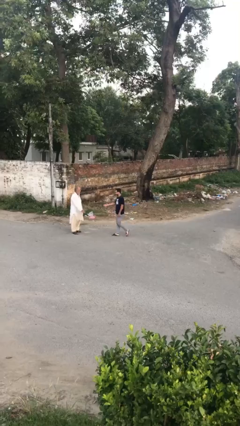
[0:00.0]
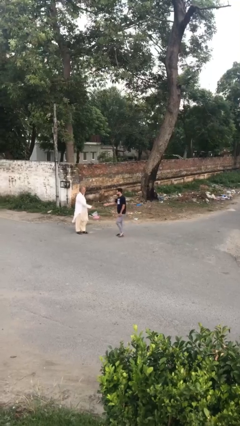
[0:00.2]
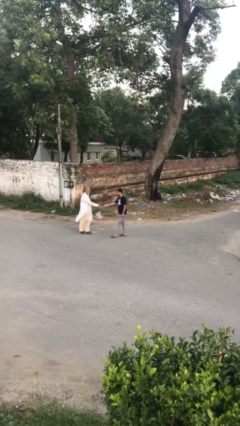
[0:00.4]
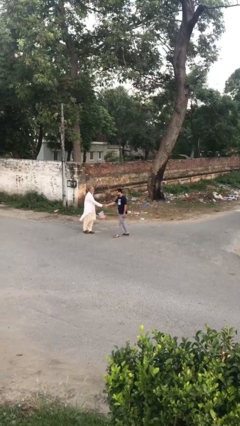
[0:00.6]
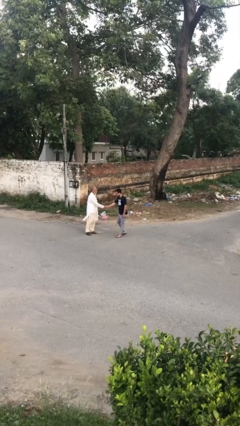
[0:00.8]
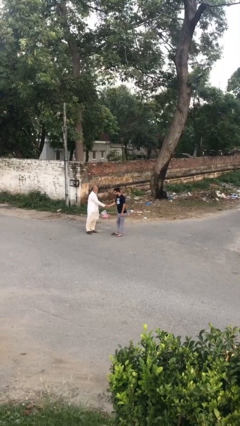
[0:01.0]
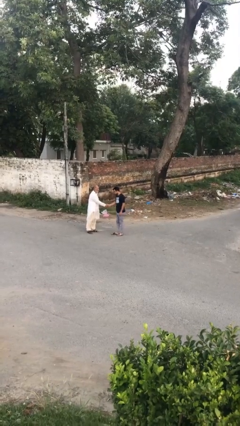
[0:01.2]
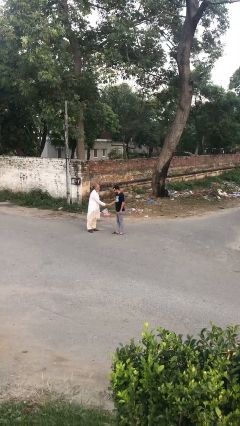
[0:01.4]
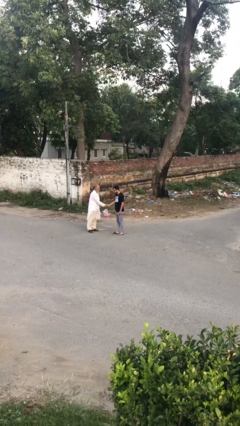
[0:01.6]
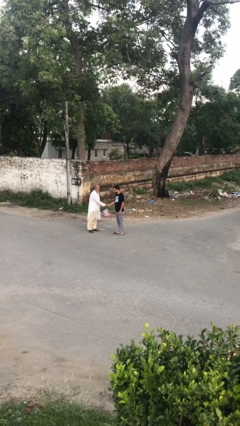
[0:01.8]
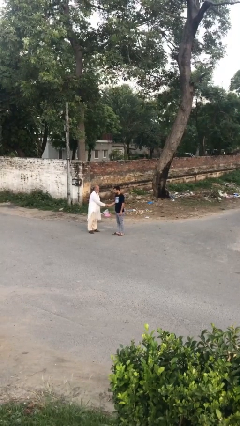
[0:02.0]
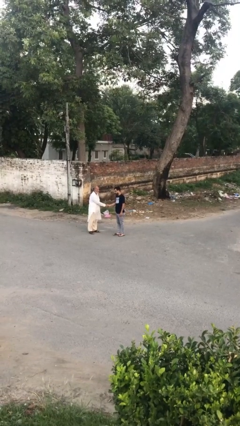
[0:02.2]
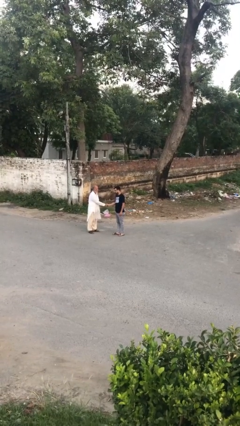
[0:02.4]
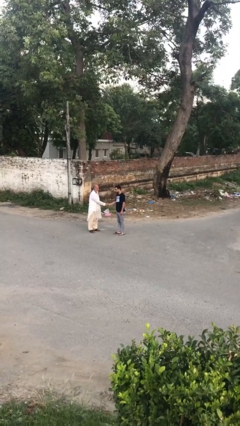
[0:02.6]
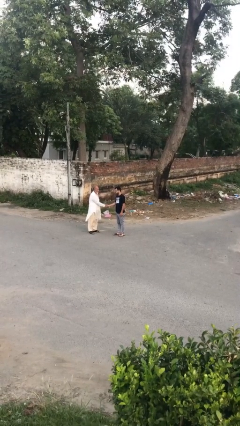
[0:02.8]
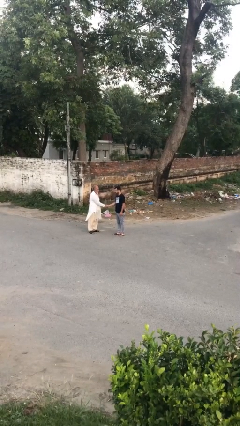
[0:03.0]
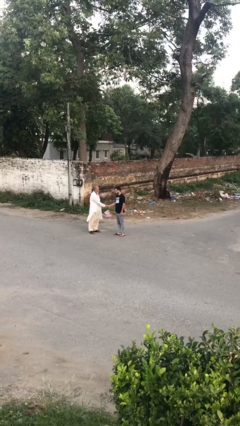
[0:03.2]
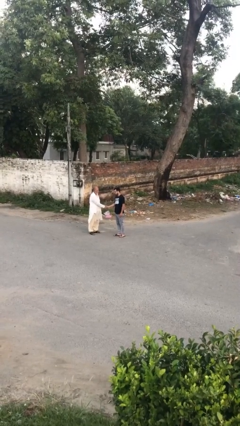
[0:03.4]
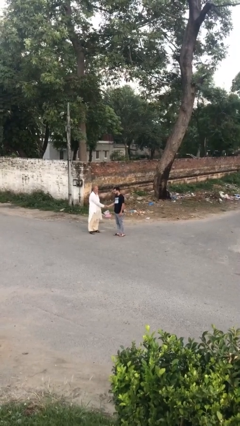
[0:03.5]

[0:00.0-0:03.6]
person shakes hand

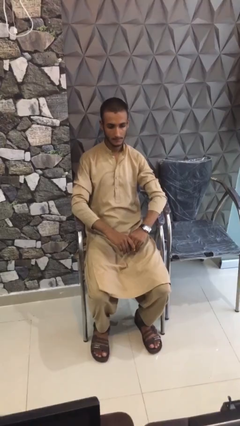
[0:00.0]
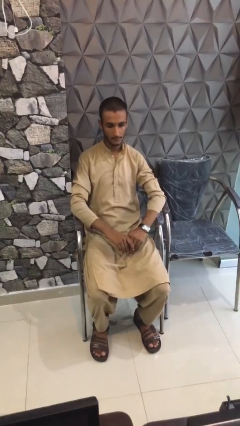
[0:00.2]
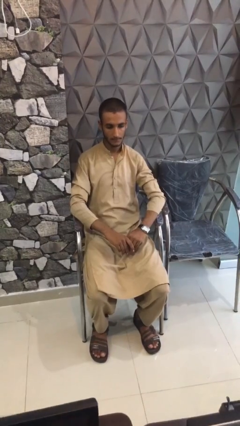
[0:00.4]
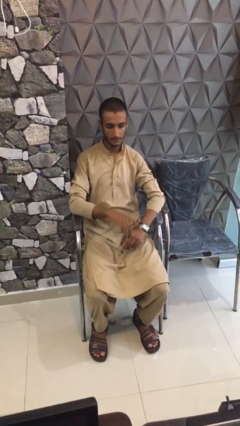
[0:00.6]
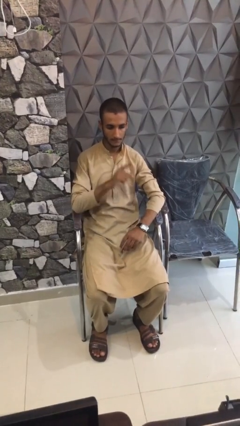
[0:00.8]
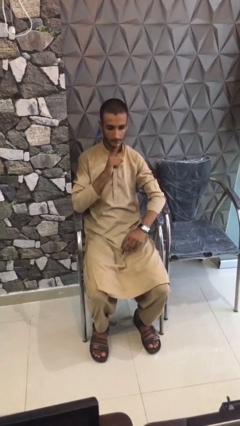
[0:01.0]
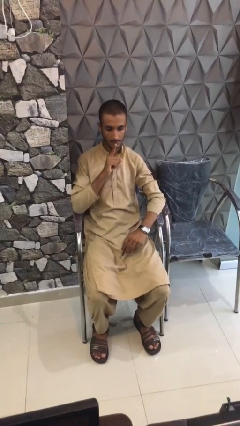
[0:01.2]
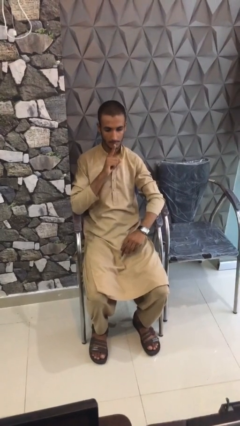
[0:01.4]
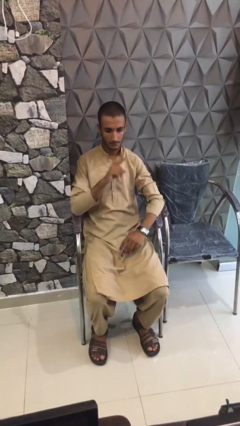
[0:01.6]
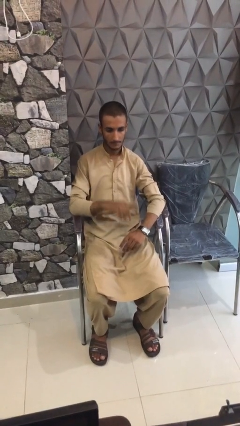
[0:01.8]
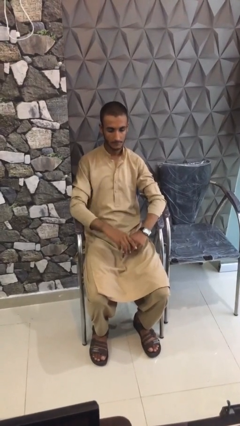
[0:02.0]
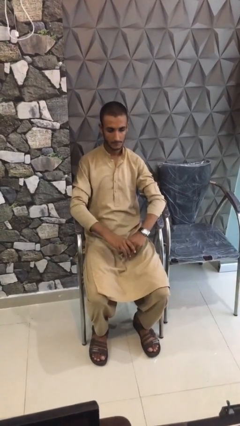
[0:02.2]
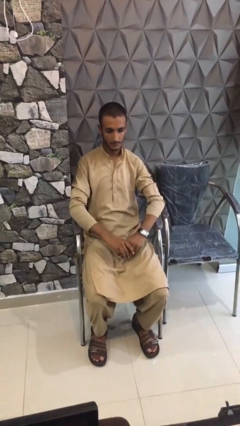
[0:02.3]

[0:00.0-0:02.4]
person gestures be quiet

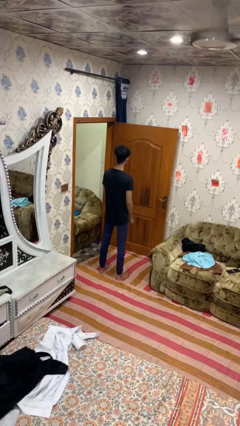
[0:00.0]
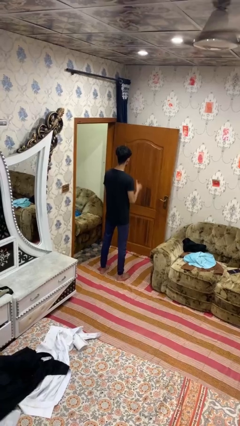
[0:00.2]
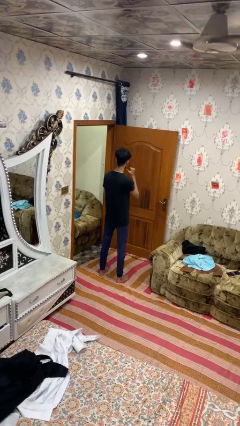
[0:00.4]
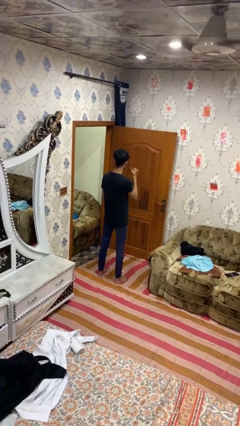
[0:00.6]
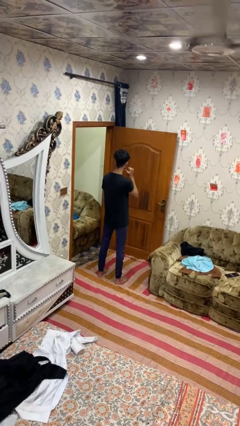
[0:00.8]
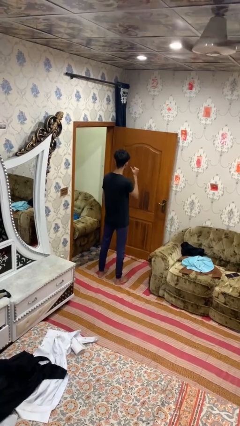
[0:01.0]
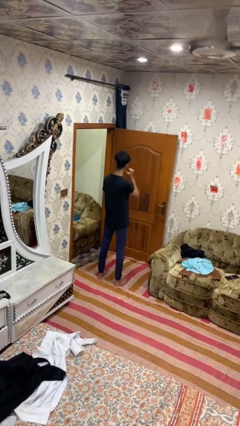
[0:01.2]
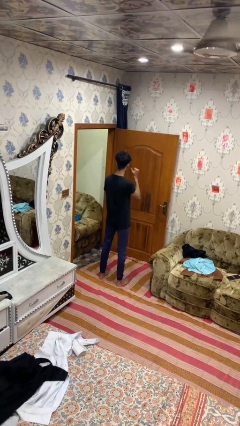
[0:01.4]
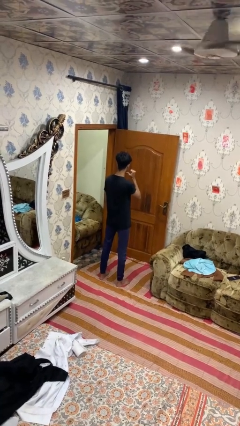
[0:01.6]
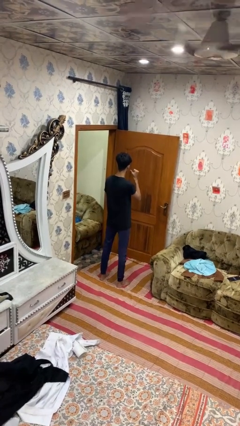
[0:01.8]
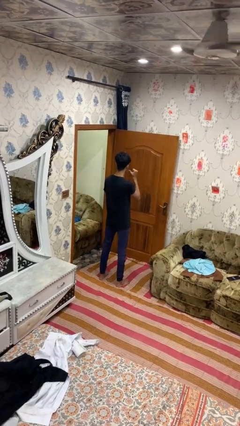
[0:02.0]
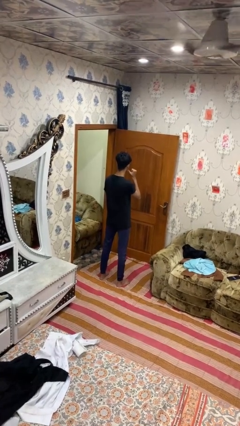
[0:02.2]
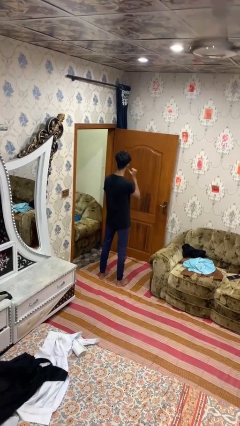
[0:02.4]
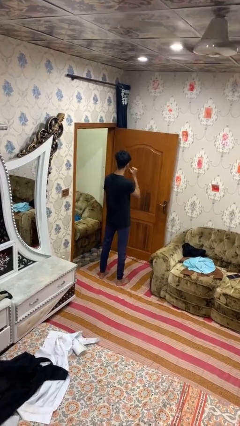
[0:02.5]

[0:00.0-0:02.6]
person gestures behind me

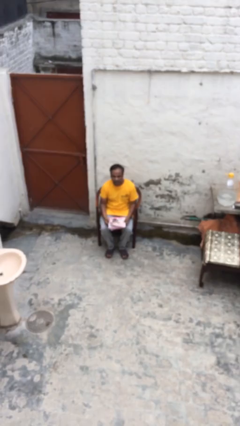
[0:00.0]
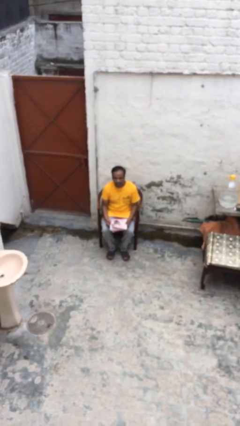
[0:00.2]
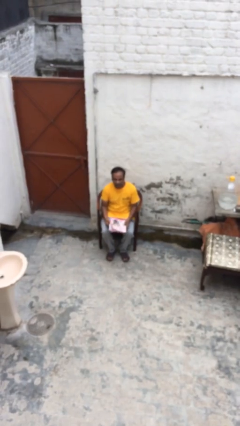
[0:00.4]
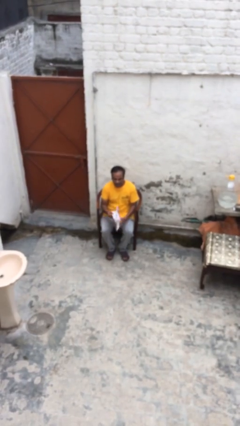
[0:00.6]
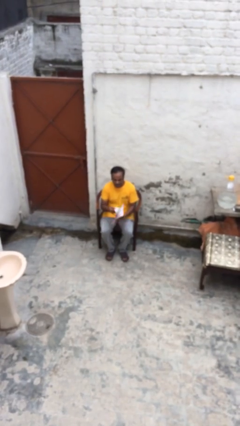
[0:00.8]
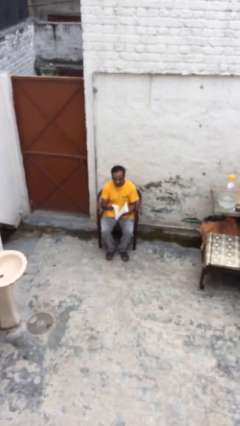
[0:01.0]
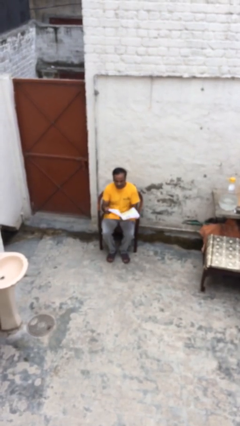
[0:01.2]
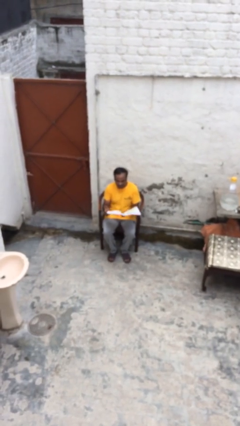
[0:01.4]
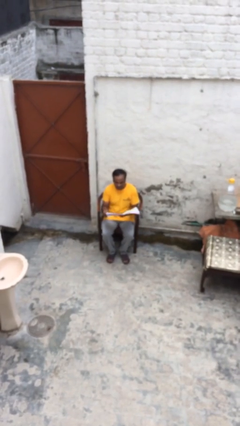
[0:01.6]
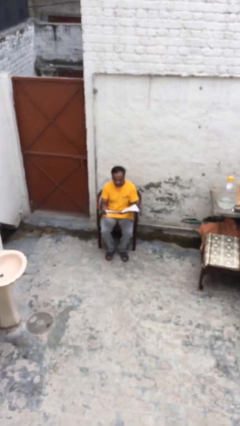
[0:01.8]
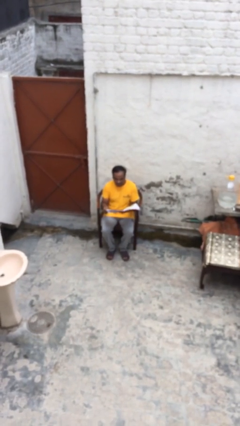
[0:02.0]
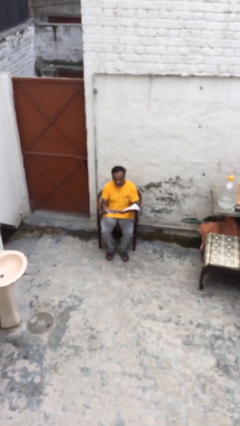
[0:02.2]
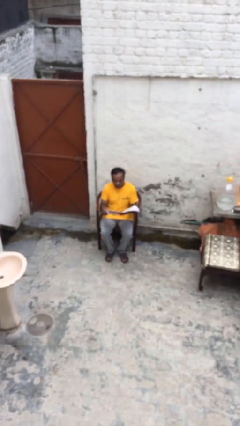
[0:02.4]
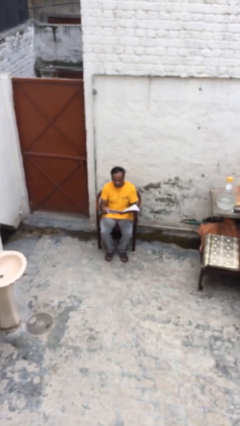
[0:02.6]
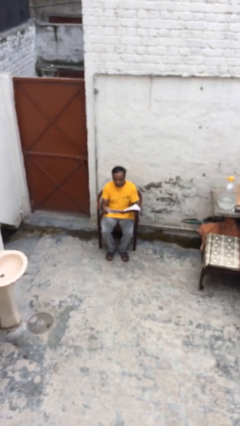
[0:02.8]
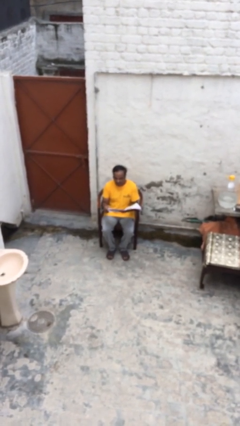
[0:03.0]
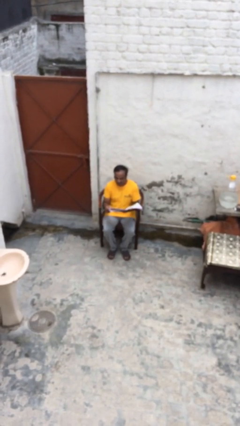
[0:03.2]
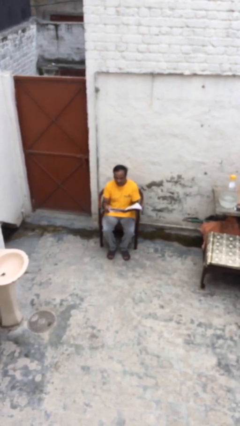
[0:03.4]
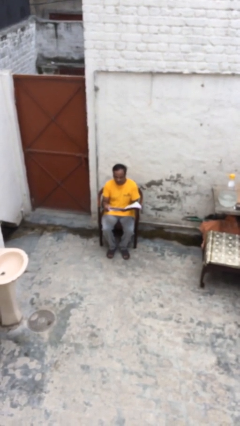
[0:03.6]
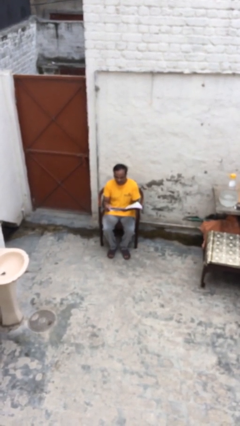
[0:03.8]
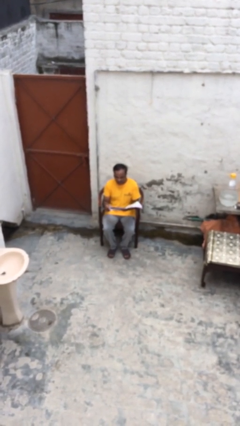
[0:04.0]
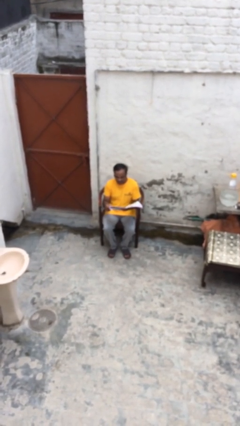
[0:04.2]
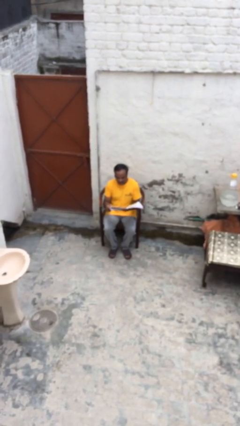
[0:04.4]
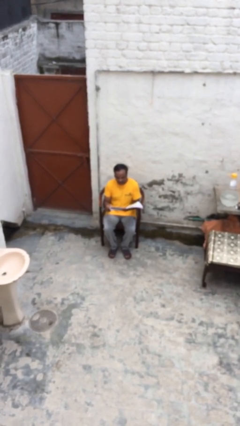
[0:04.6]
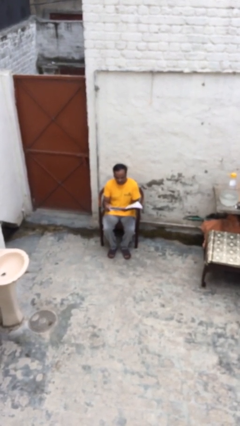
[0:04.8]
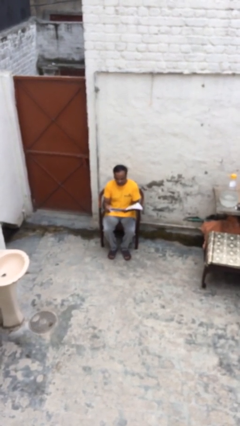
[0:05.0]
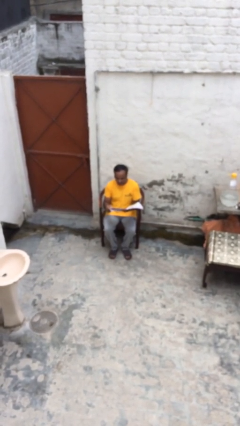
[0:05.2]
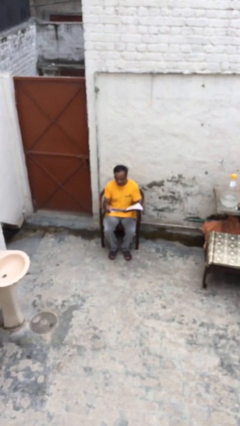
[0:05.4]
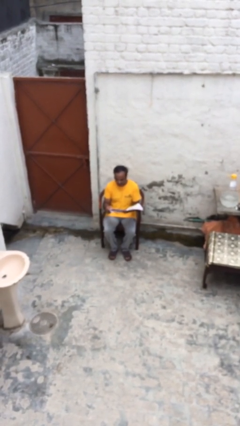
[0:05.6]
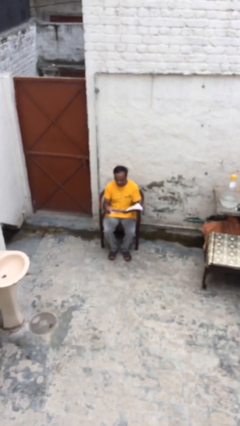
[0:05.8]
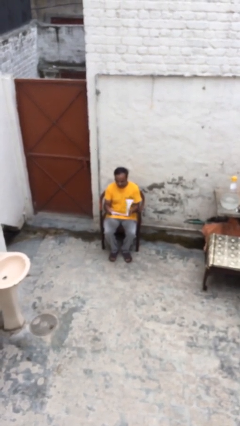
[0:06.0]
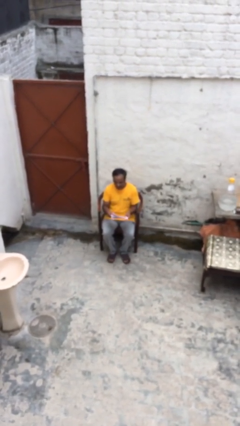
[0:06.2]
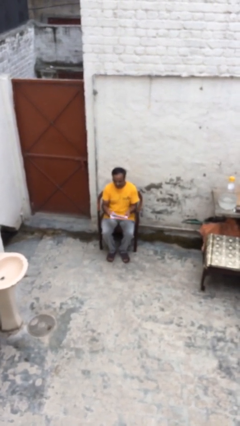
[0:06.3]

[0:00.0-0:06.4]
person reads document

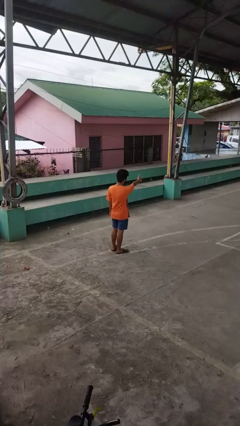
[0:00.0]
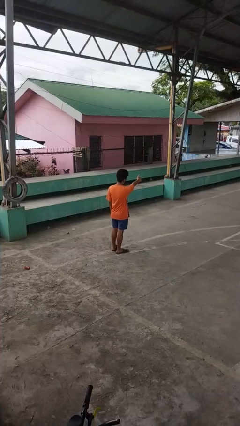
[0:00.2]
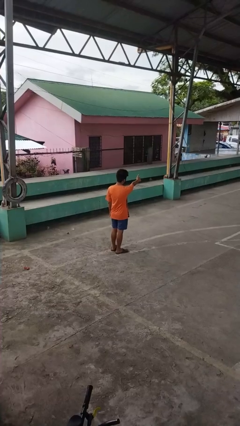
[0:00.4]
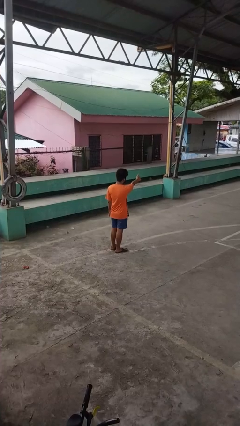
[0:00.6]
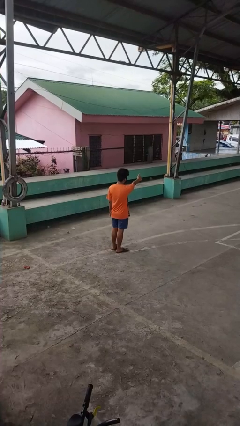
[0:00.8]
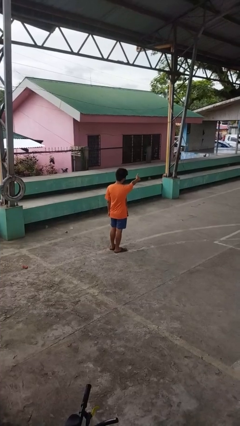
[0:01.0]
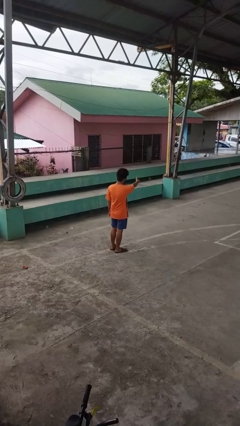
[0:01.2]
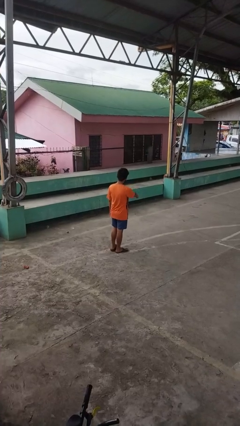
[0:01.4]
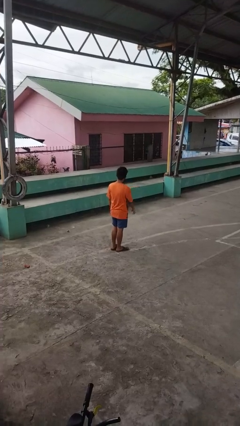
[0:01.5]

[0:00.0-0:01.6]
person gestures thumbs up

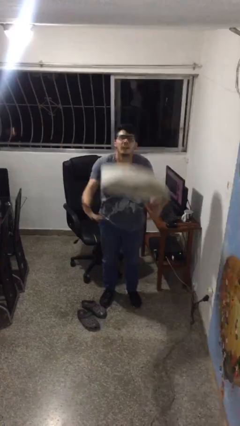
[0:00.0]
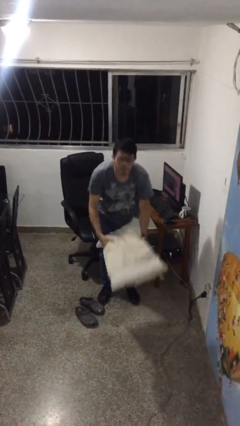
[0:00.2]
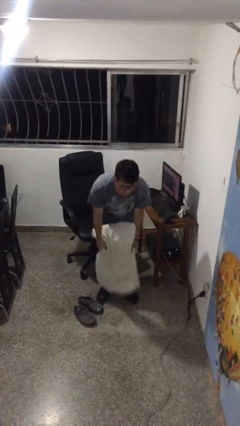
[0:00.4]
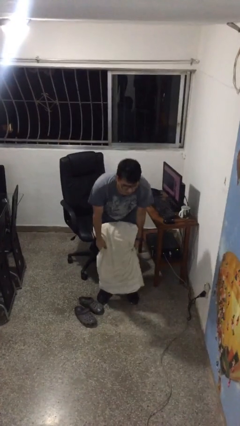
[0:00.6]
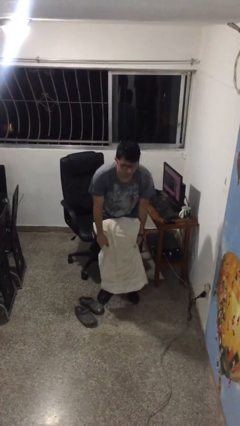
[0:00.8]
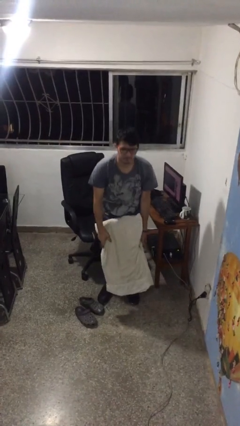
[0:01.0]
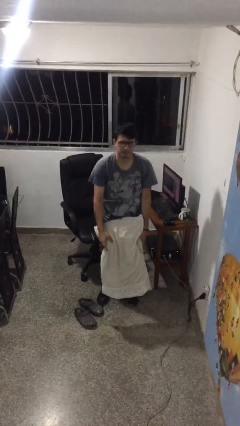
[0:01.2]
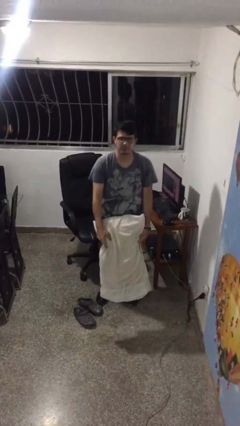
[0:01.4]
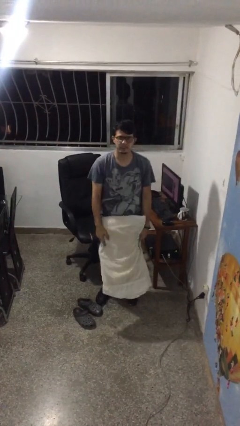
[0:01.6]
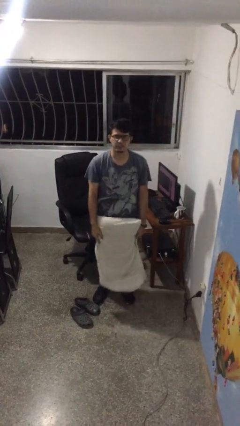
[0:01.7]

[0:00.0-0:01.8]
person catches dropped object
